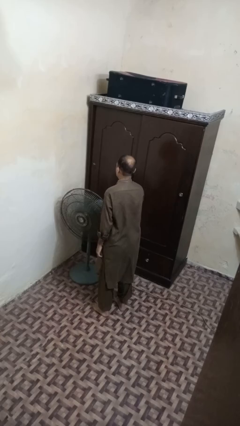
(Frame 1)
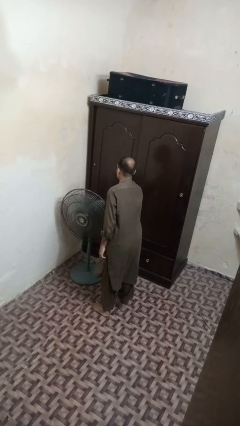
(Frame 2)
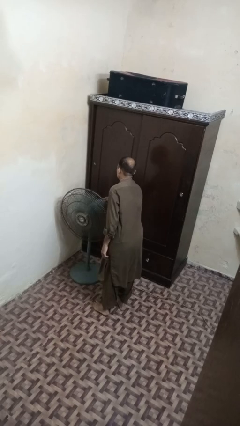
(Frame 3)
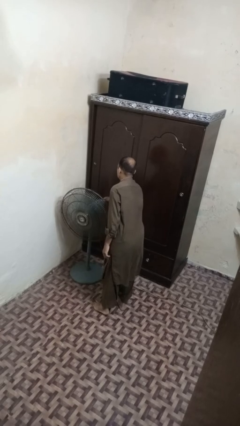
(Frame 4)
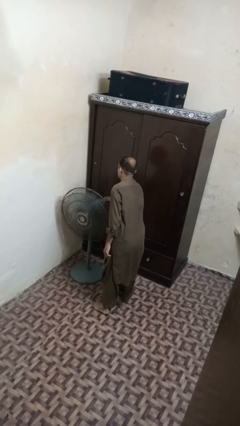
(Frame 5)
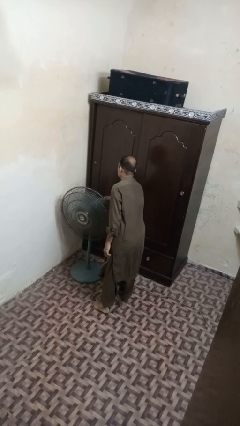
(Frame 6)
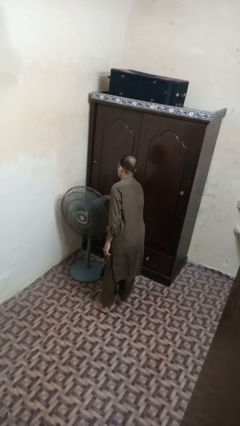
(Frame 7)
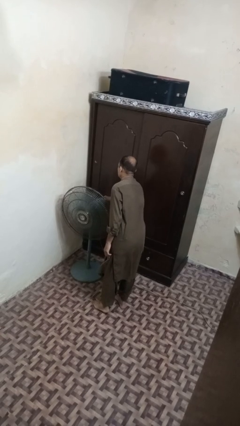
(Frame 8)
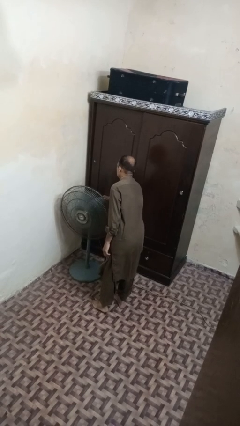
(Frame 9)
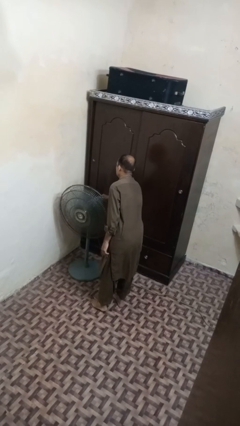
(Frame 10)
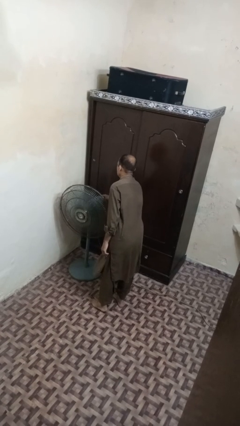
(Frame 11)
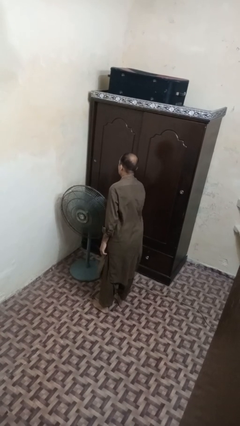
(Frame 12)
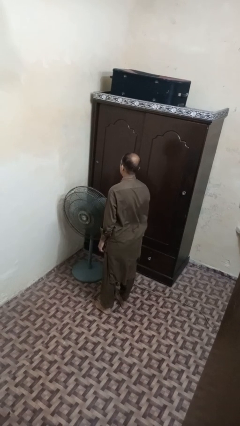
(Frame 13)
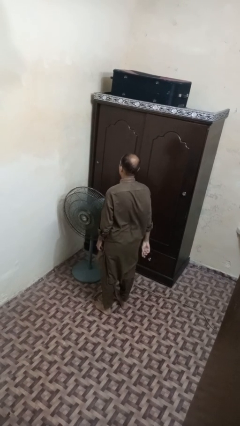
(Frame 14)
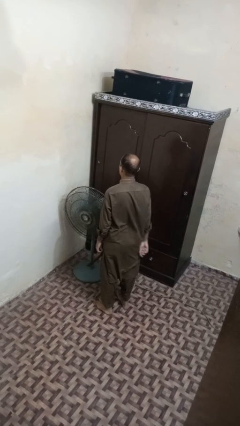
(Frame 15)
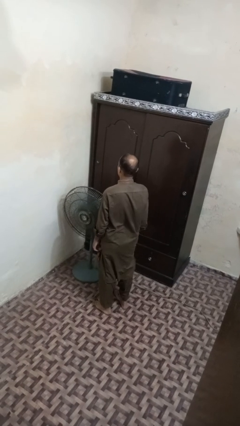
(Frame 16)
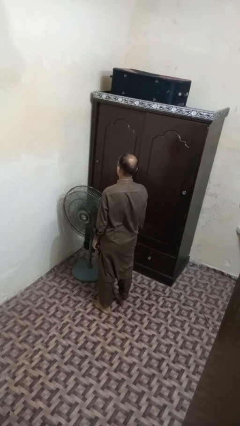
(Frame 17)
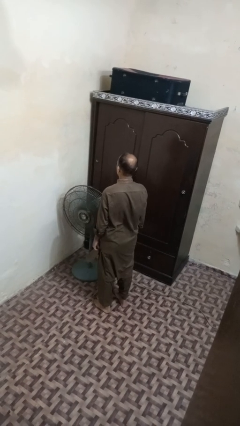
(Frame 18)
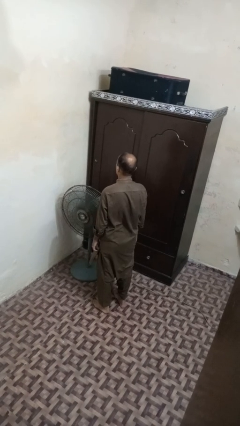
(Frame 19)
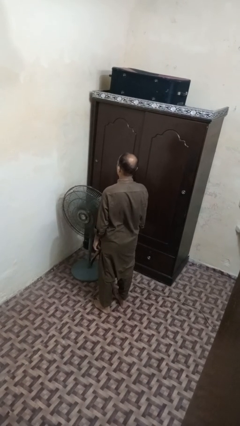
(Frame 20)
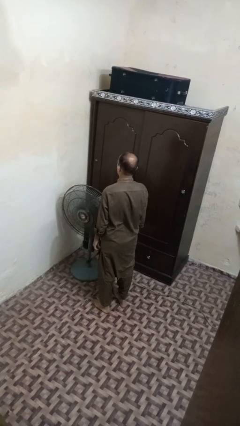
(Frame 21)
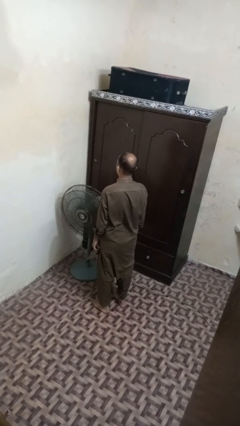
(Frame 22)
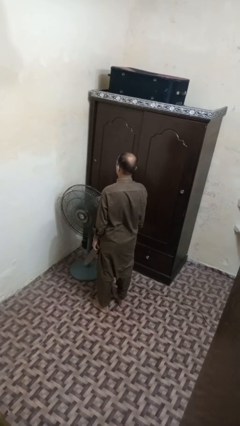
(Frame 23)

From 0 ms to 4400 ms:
person turns on fan

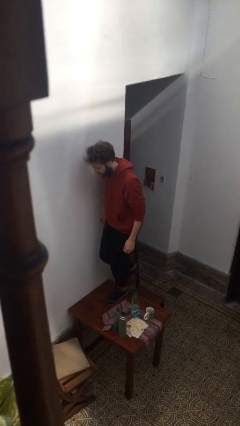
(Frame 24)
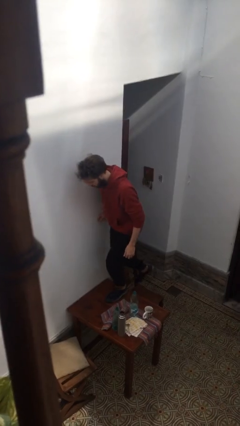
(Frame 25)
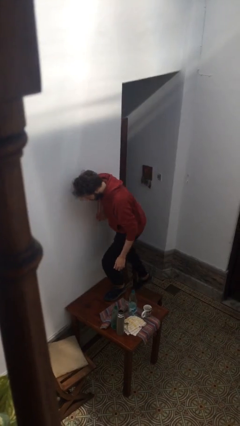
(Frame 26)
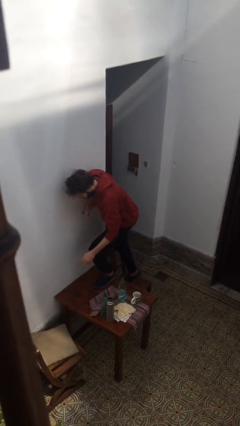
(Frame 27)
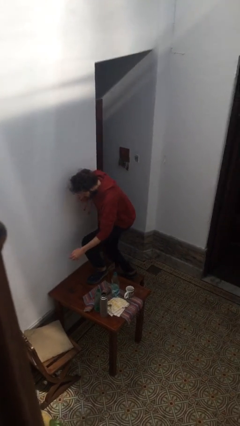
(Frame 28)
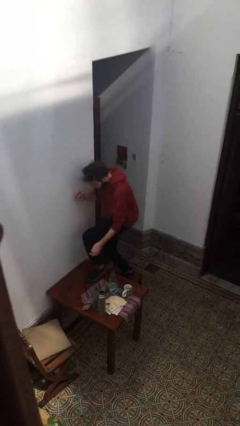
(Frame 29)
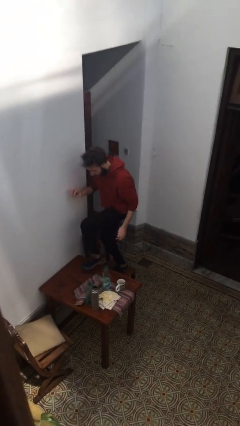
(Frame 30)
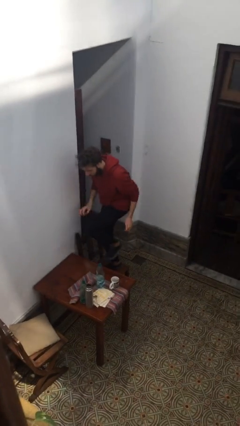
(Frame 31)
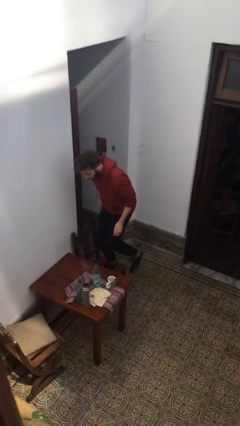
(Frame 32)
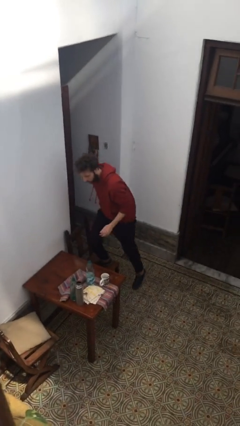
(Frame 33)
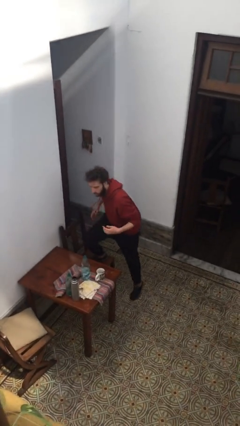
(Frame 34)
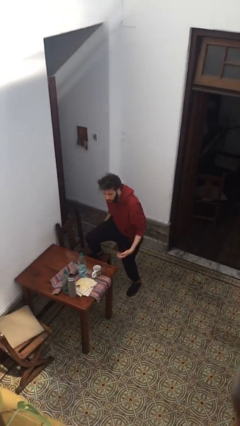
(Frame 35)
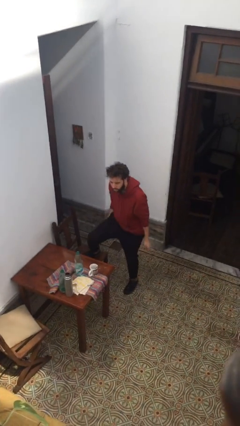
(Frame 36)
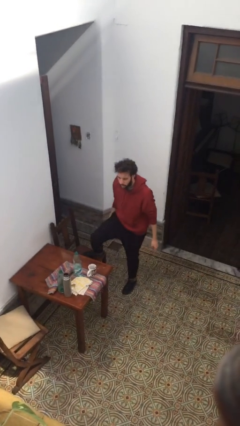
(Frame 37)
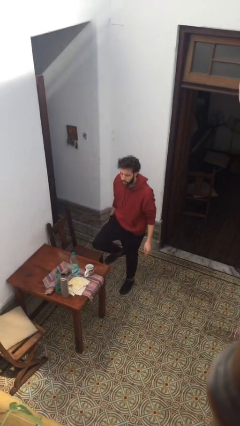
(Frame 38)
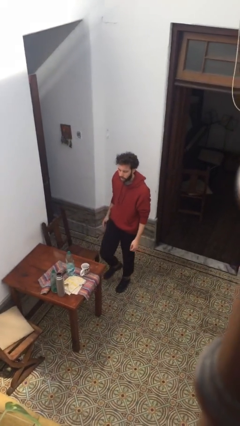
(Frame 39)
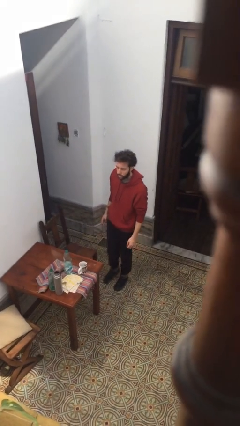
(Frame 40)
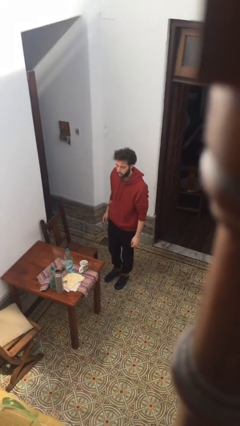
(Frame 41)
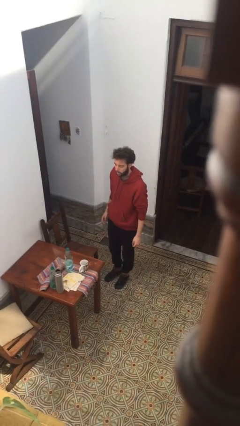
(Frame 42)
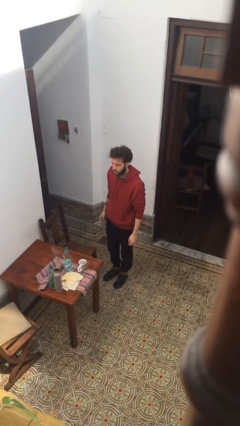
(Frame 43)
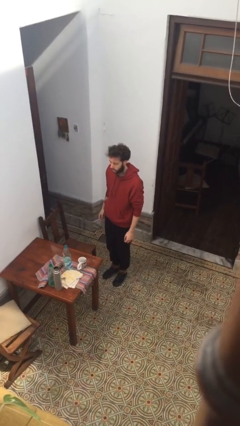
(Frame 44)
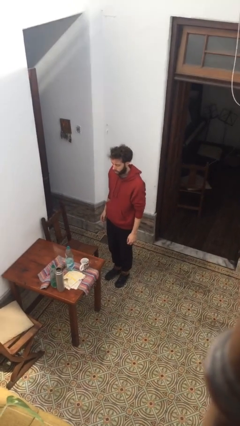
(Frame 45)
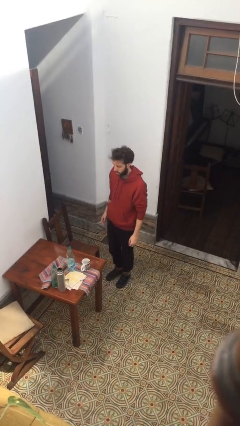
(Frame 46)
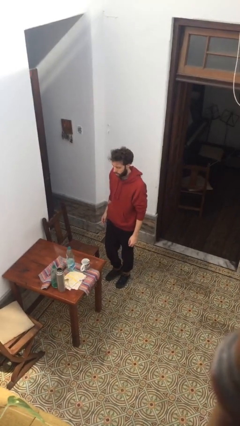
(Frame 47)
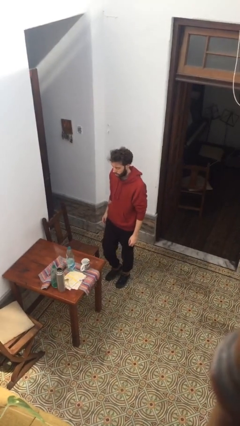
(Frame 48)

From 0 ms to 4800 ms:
person climbs off table

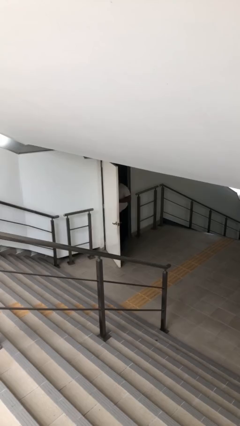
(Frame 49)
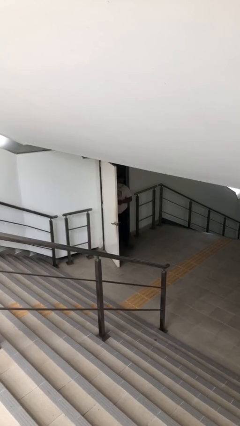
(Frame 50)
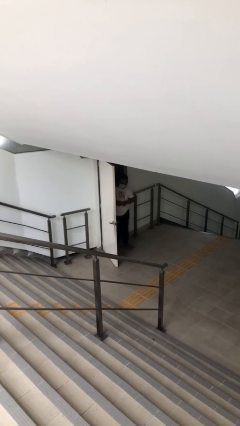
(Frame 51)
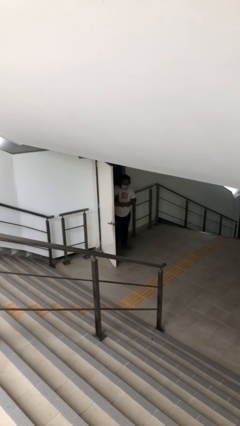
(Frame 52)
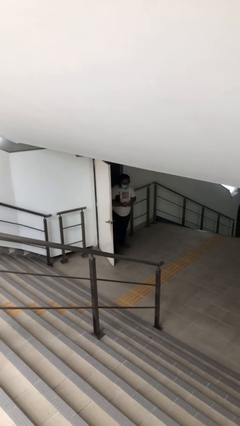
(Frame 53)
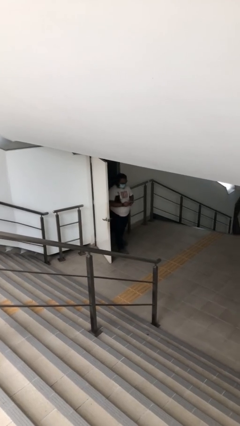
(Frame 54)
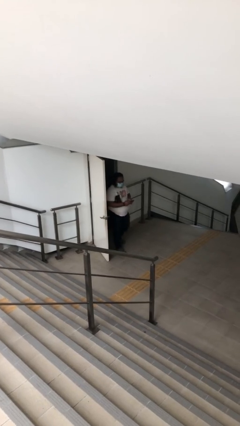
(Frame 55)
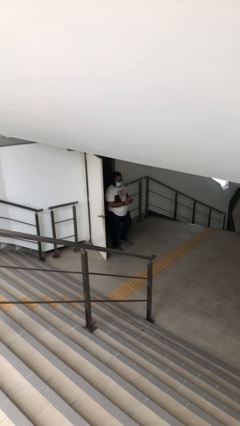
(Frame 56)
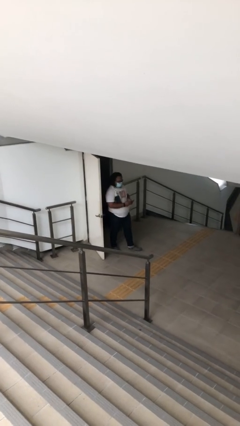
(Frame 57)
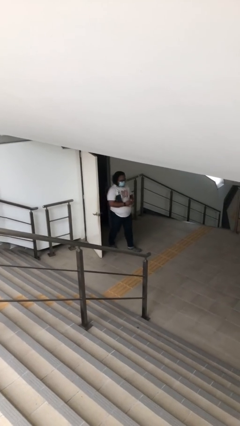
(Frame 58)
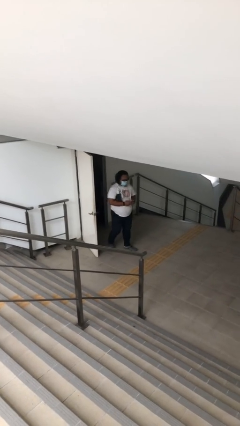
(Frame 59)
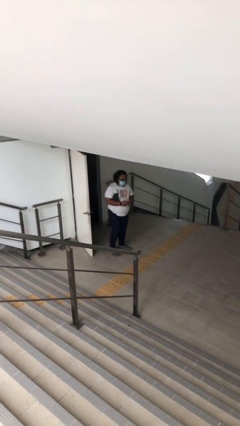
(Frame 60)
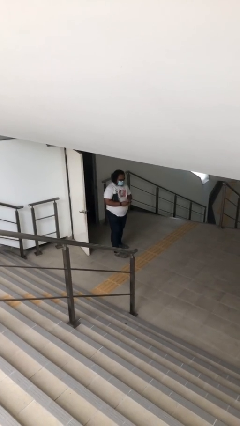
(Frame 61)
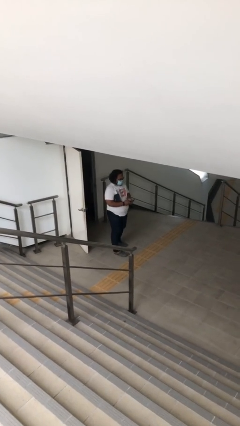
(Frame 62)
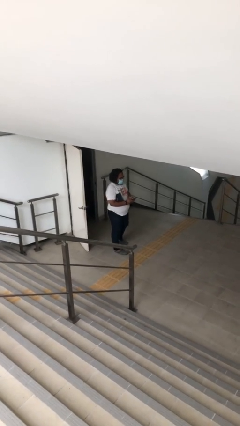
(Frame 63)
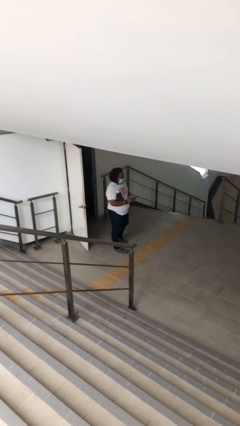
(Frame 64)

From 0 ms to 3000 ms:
person enters scene through structure

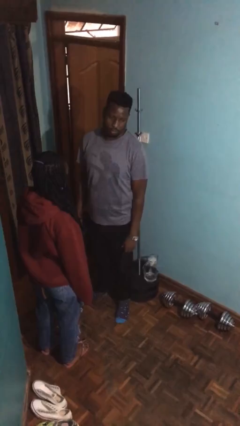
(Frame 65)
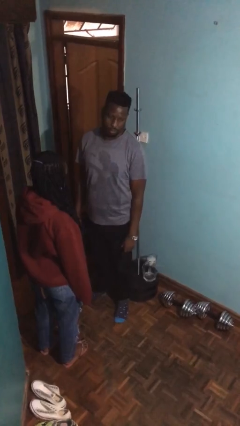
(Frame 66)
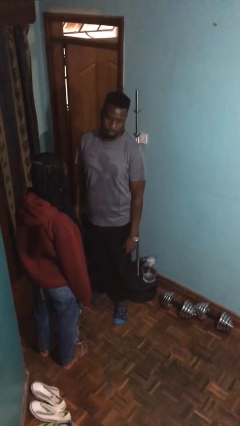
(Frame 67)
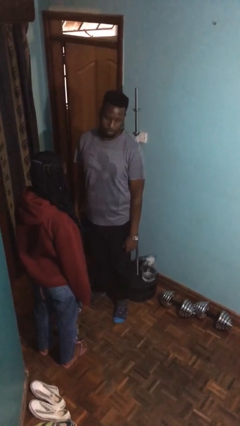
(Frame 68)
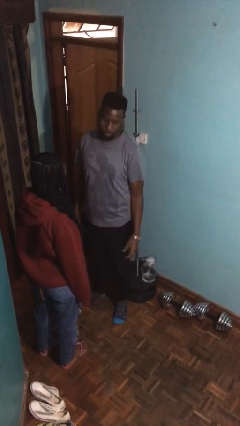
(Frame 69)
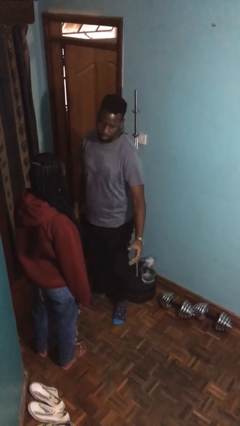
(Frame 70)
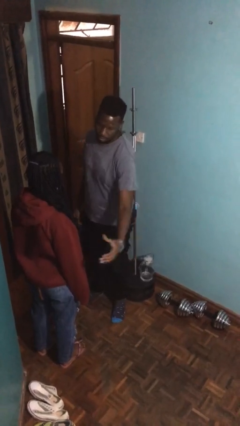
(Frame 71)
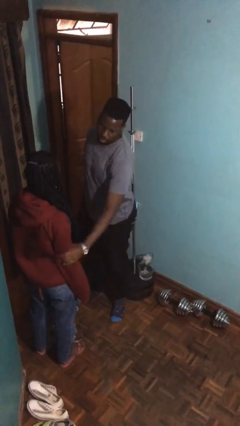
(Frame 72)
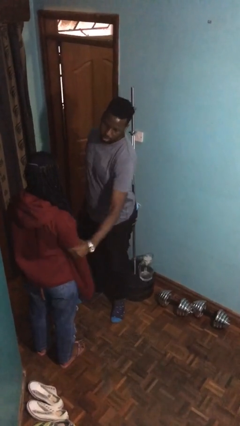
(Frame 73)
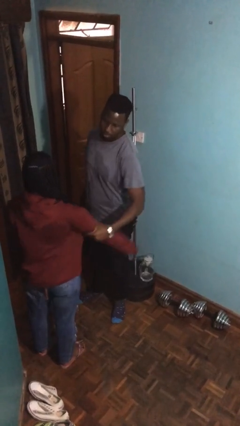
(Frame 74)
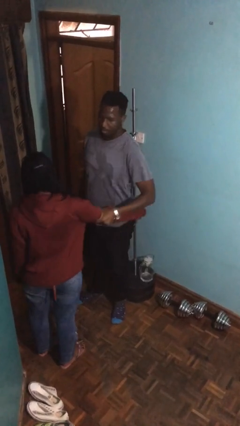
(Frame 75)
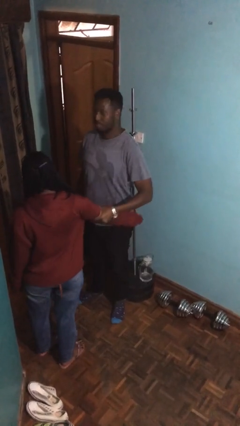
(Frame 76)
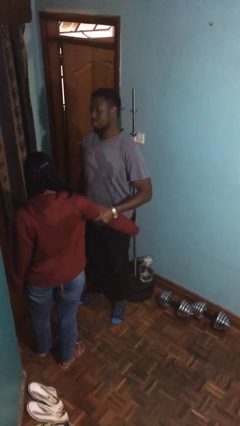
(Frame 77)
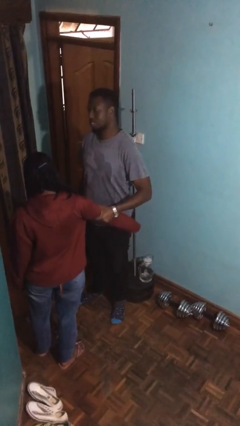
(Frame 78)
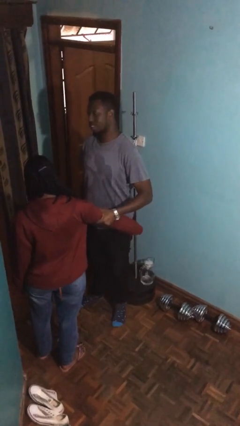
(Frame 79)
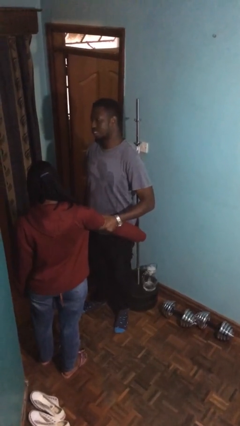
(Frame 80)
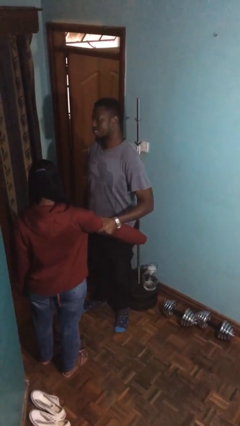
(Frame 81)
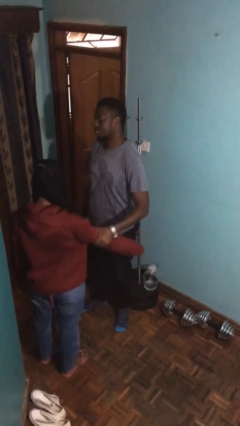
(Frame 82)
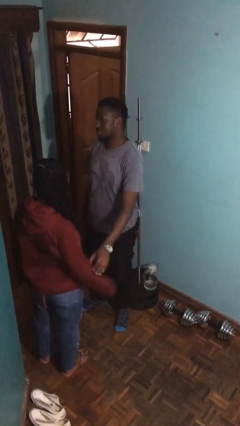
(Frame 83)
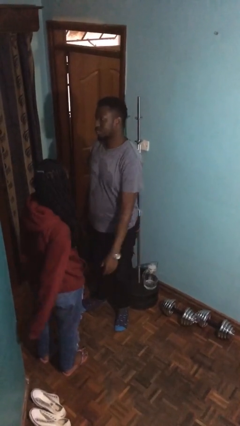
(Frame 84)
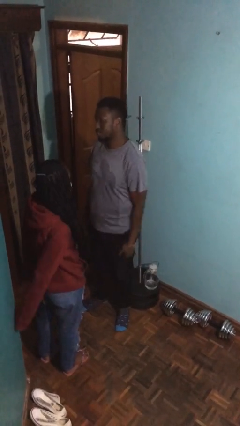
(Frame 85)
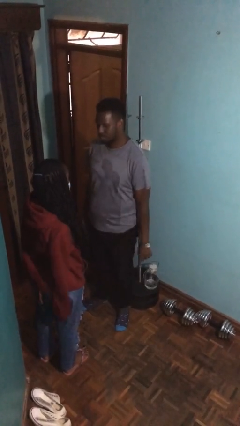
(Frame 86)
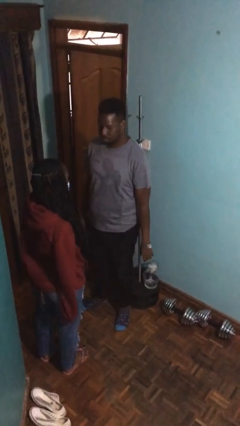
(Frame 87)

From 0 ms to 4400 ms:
person grabs person by bicep

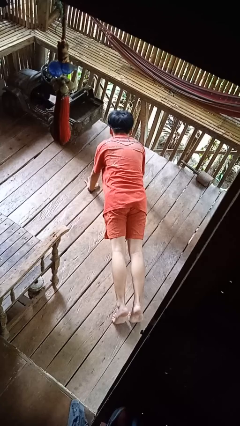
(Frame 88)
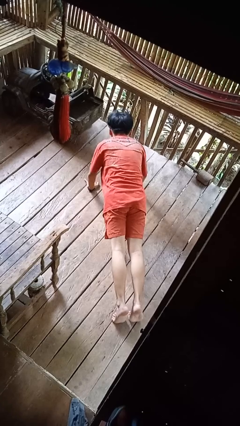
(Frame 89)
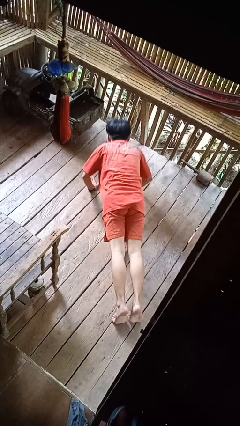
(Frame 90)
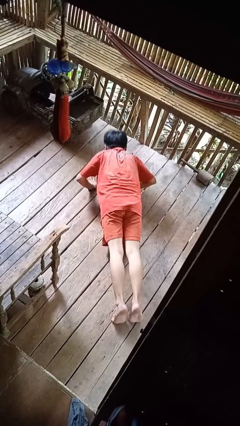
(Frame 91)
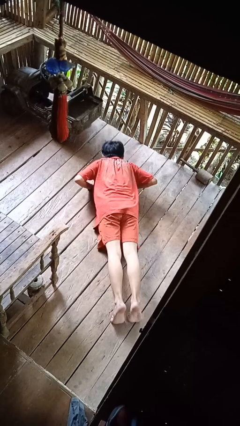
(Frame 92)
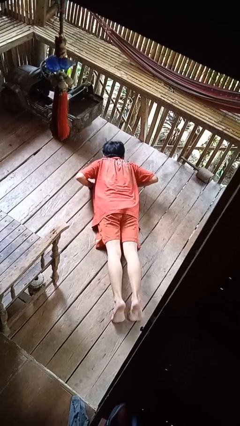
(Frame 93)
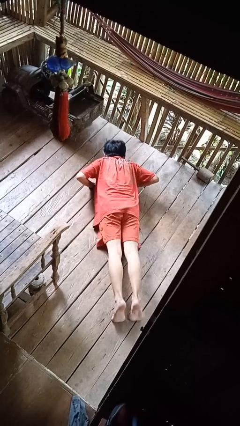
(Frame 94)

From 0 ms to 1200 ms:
person exercises with pushup
